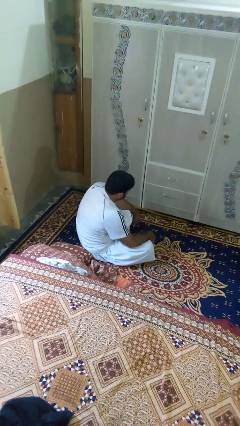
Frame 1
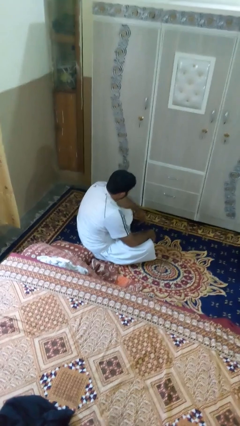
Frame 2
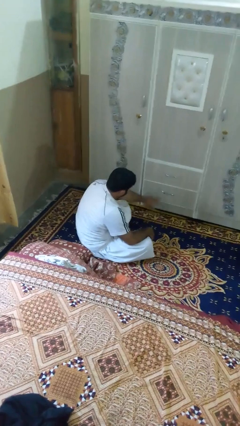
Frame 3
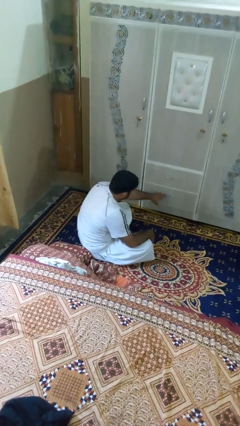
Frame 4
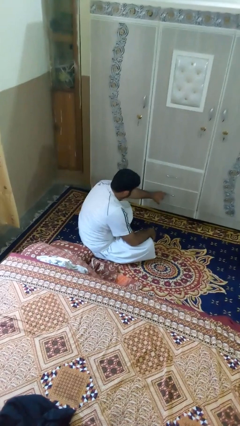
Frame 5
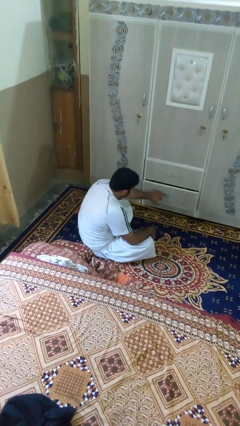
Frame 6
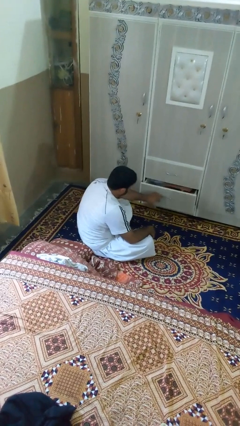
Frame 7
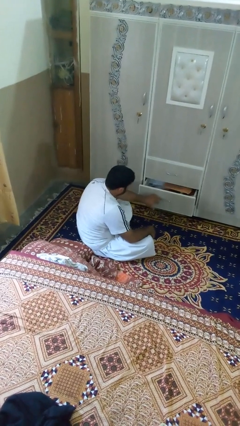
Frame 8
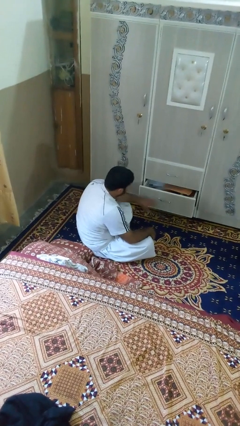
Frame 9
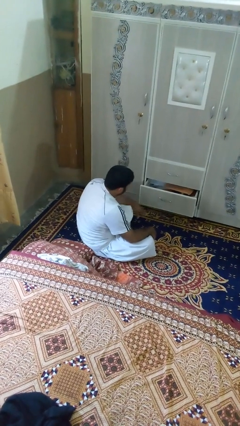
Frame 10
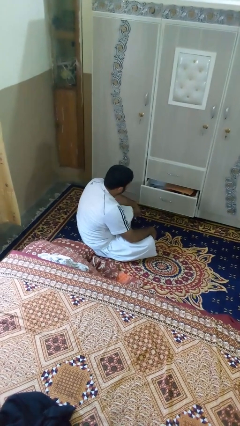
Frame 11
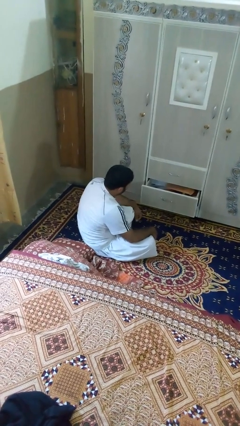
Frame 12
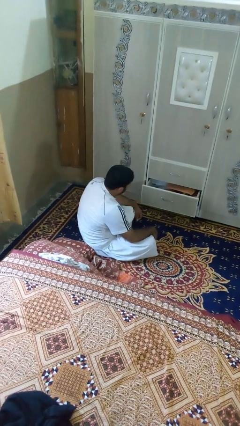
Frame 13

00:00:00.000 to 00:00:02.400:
person opens dresser drawer

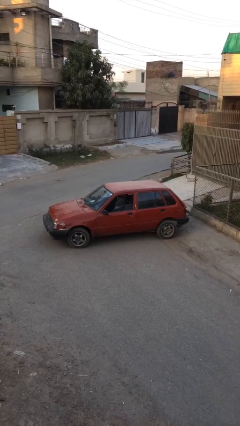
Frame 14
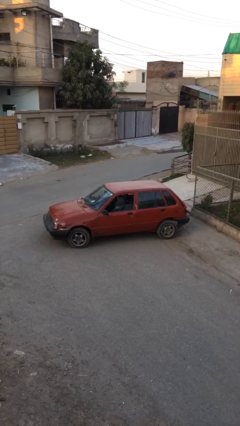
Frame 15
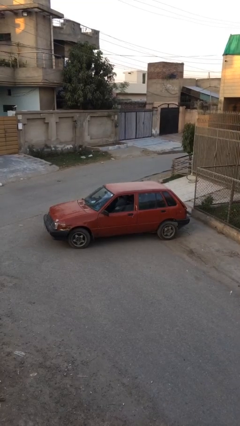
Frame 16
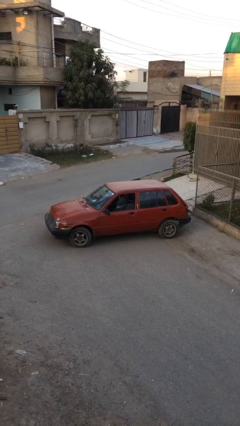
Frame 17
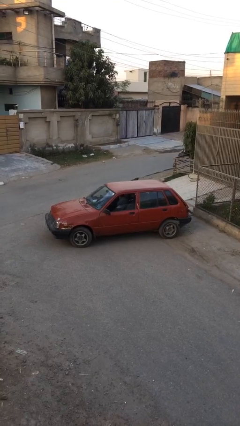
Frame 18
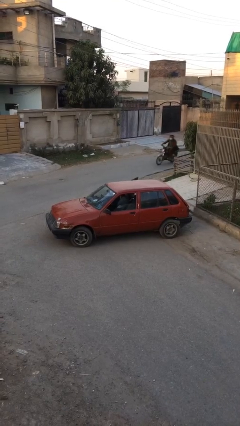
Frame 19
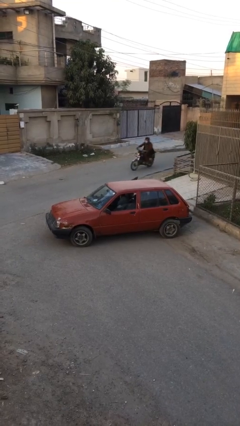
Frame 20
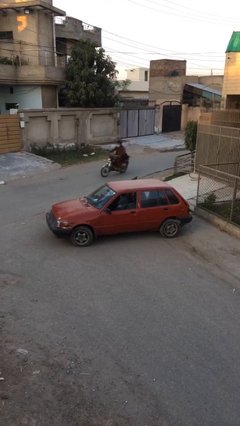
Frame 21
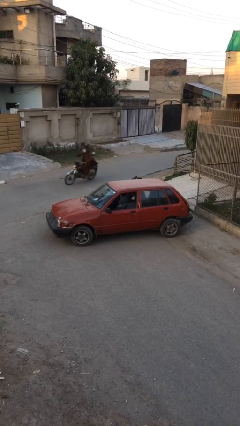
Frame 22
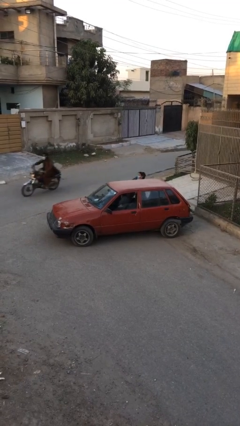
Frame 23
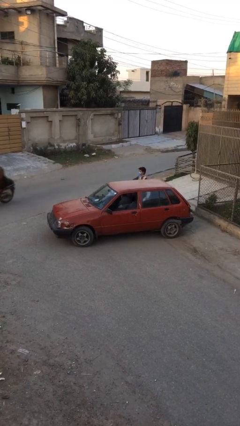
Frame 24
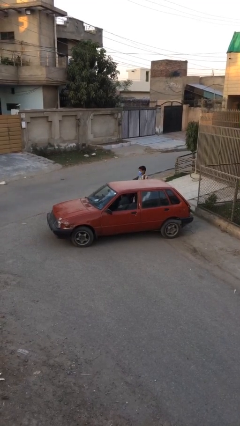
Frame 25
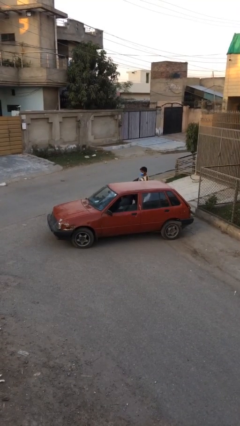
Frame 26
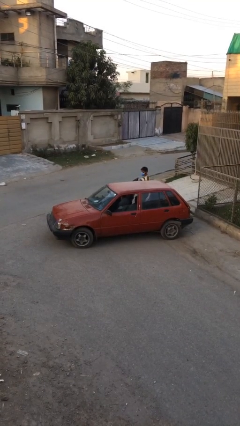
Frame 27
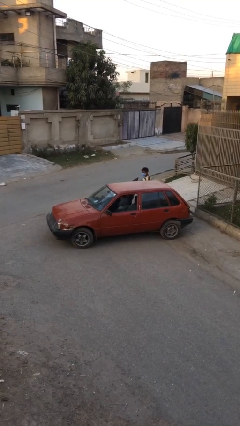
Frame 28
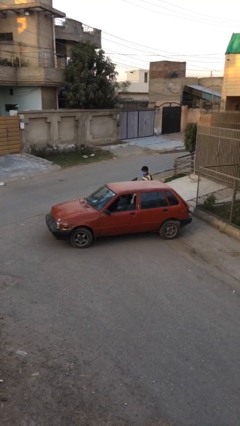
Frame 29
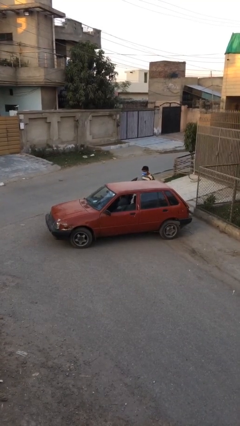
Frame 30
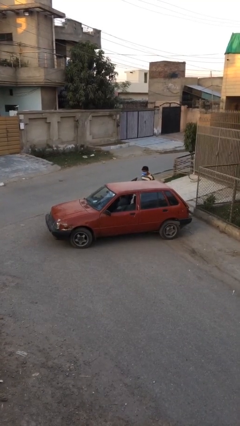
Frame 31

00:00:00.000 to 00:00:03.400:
car drops off person

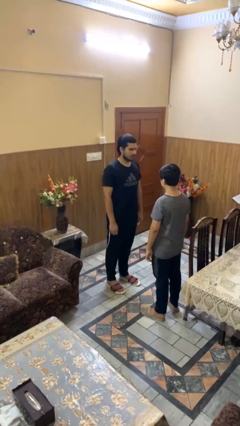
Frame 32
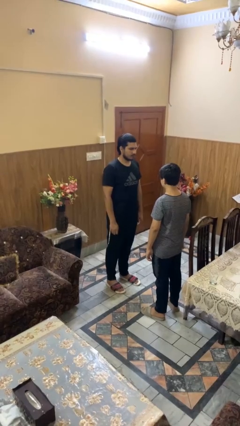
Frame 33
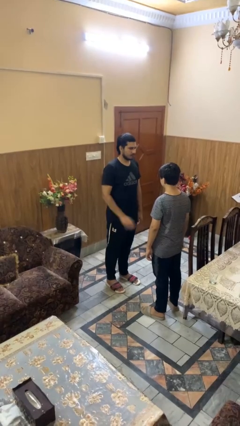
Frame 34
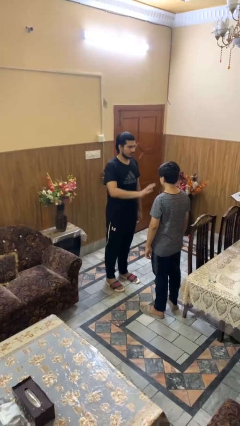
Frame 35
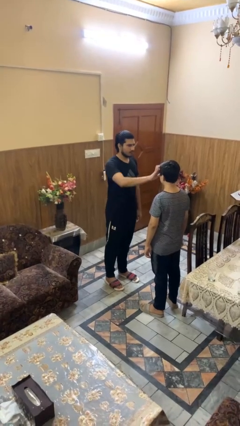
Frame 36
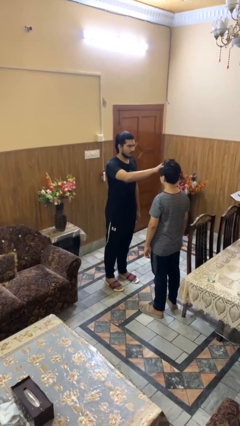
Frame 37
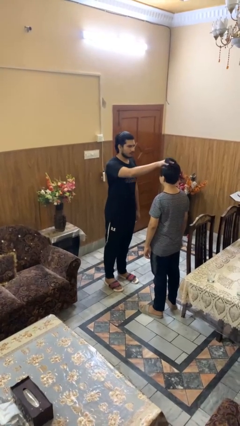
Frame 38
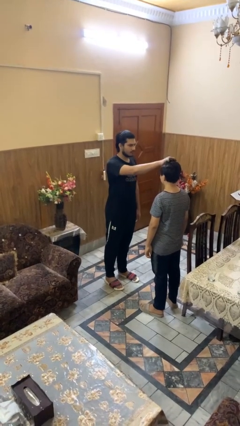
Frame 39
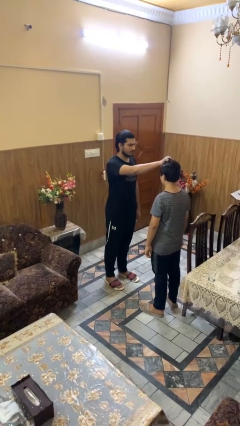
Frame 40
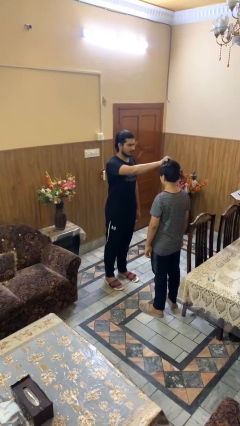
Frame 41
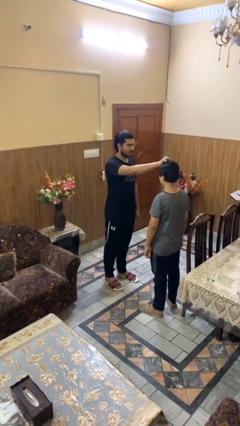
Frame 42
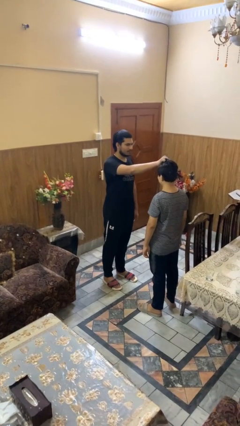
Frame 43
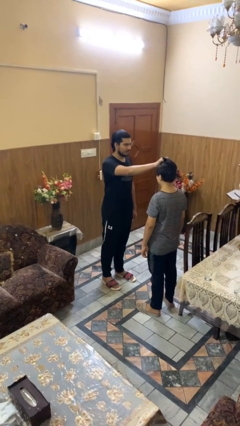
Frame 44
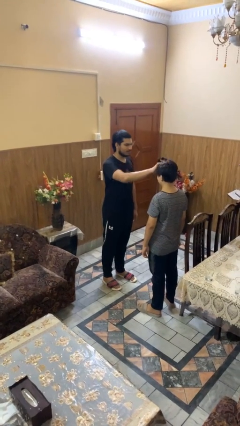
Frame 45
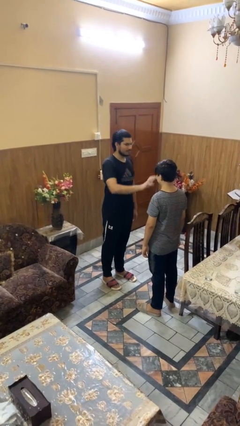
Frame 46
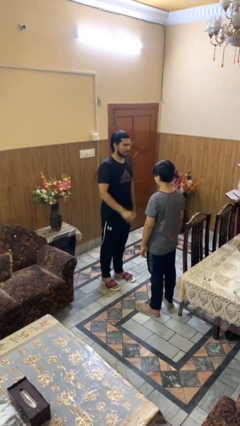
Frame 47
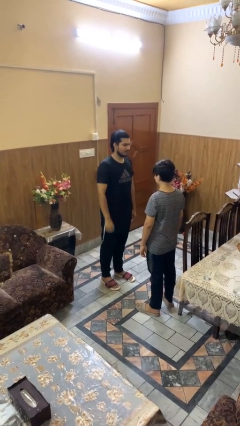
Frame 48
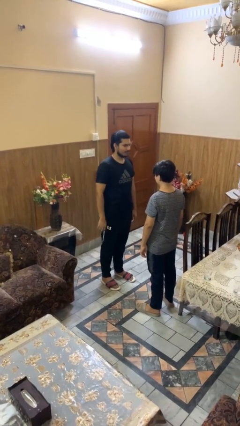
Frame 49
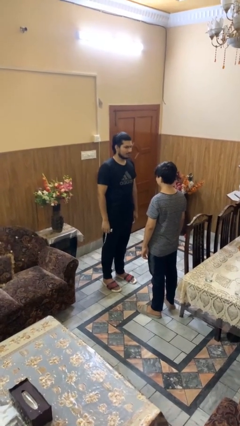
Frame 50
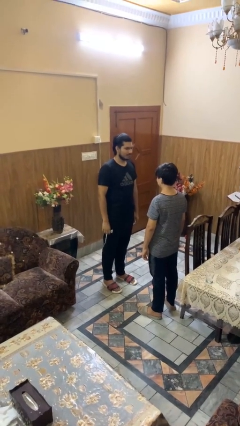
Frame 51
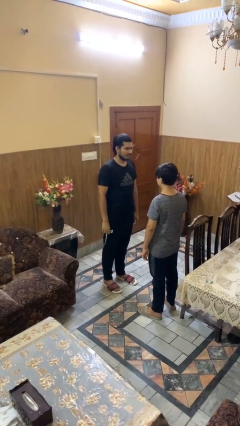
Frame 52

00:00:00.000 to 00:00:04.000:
person grabs person by hair

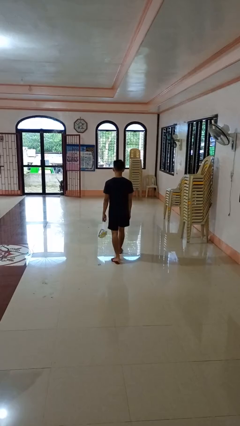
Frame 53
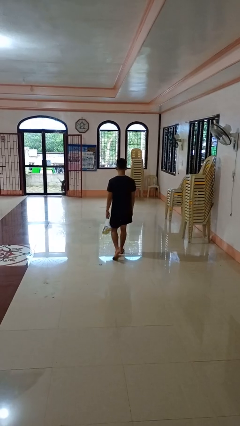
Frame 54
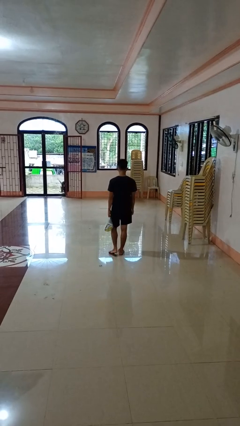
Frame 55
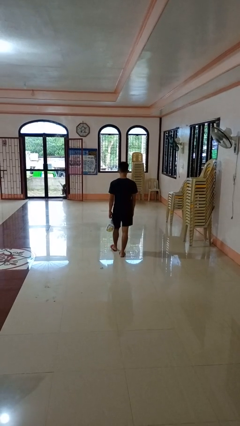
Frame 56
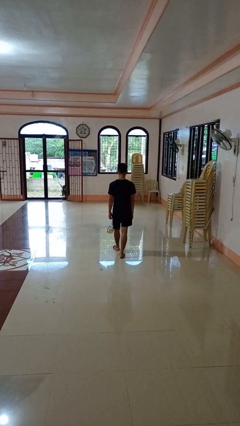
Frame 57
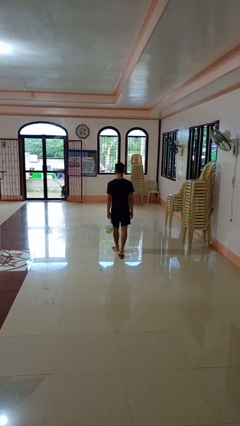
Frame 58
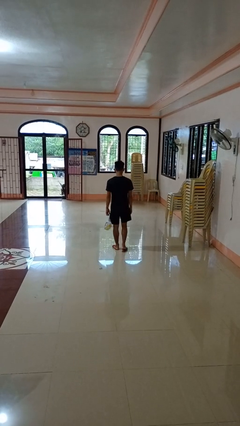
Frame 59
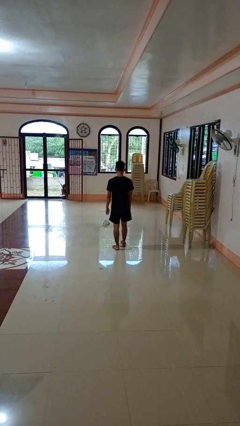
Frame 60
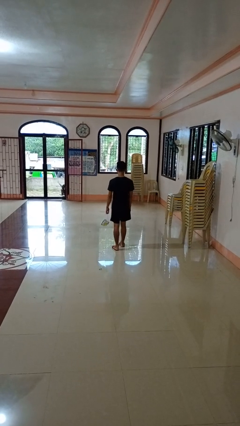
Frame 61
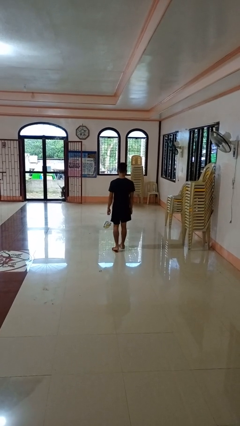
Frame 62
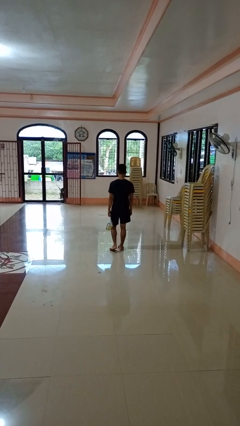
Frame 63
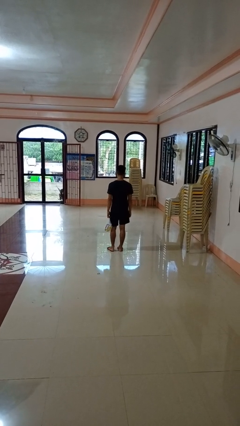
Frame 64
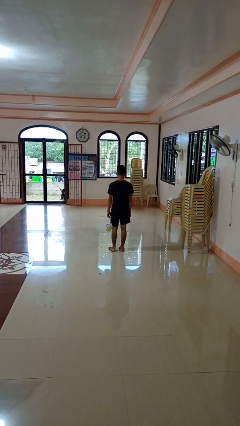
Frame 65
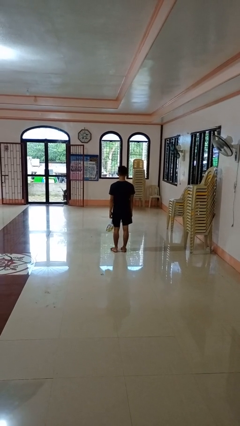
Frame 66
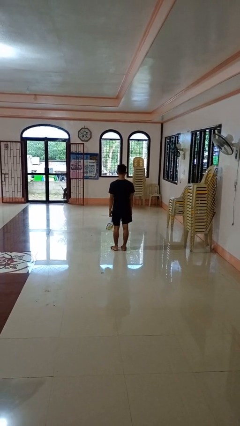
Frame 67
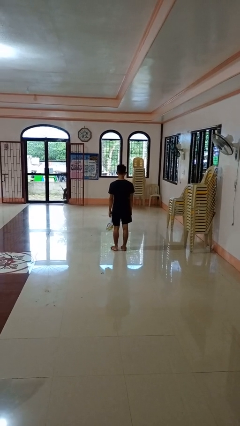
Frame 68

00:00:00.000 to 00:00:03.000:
person carries groceries

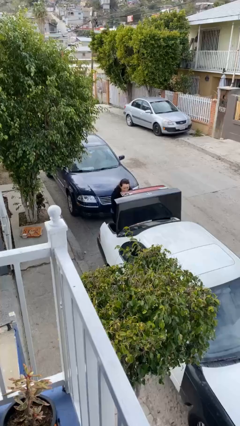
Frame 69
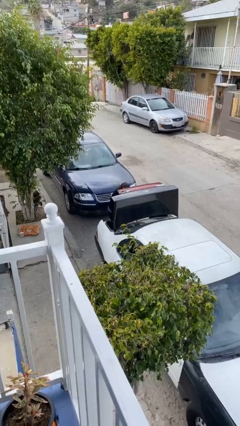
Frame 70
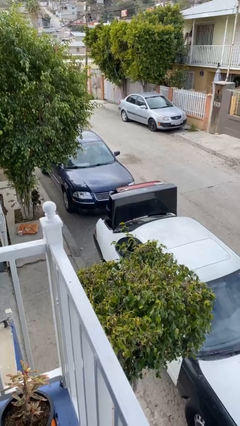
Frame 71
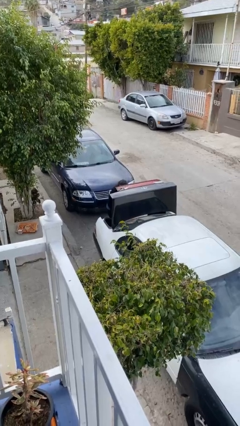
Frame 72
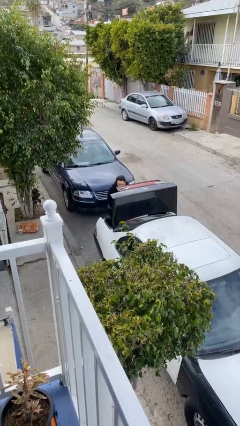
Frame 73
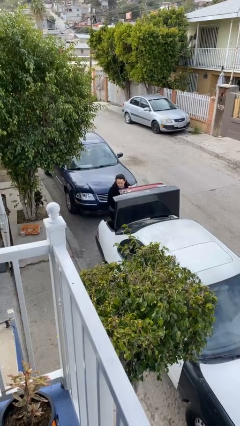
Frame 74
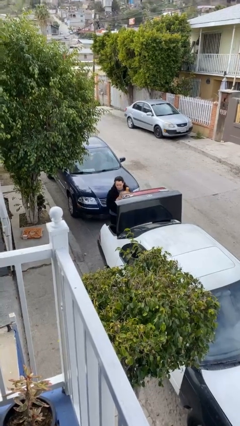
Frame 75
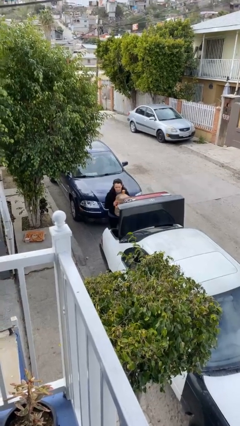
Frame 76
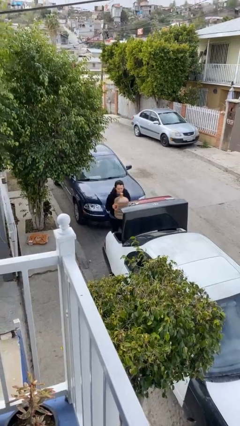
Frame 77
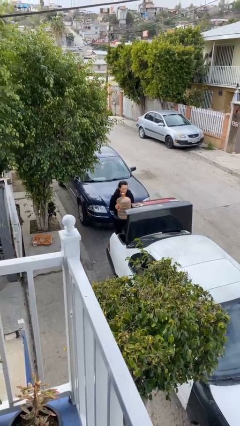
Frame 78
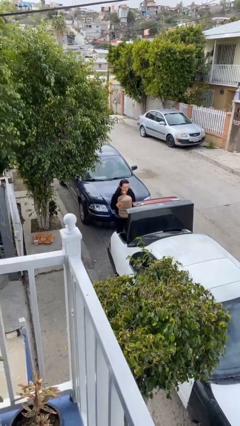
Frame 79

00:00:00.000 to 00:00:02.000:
person unloads car

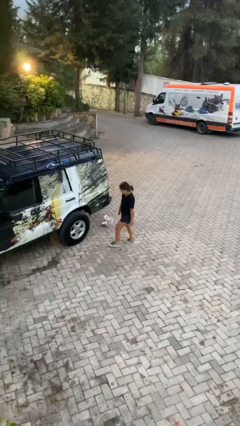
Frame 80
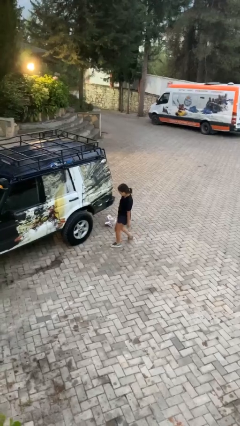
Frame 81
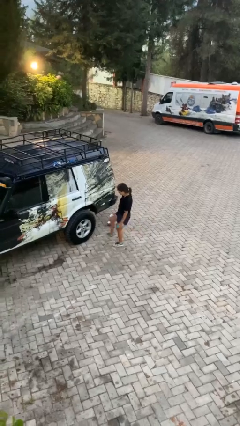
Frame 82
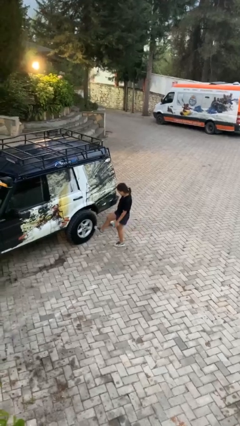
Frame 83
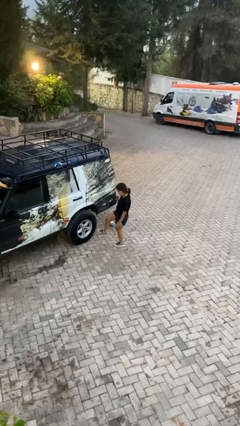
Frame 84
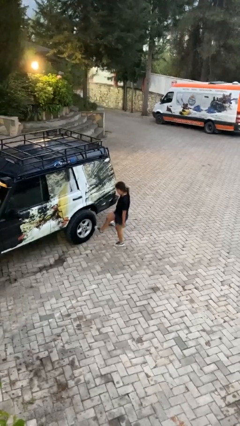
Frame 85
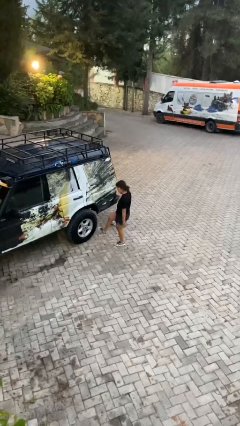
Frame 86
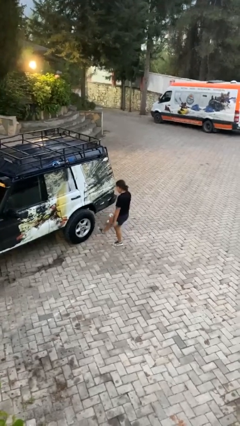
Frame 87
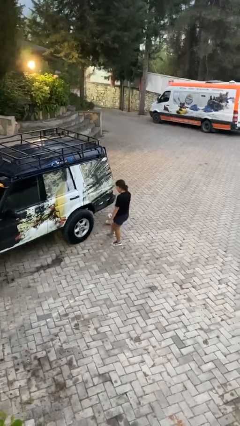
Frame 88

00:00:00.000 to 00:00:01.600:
person kicks car tires

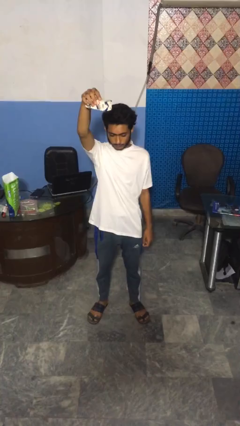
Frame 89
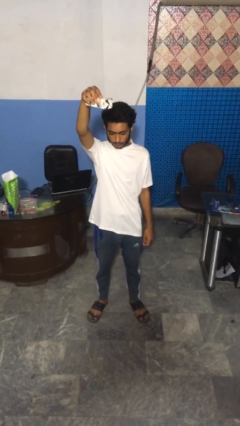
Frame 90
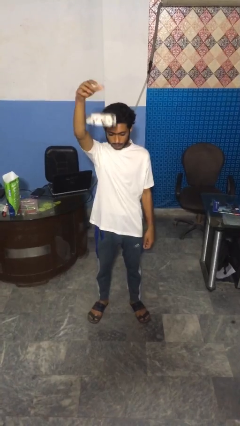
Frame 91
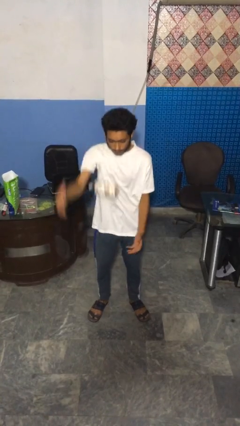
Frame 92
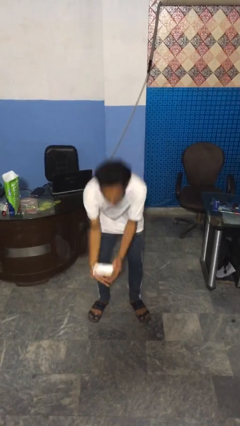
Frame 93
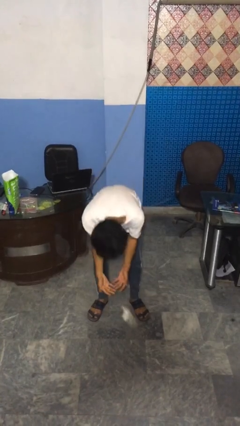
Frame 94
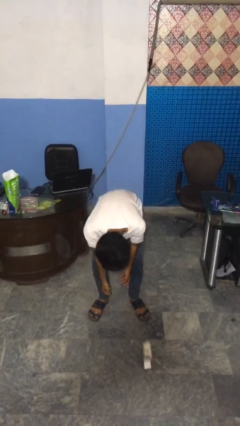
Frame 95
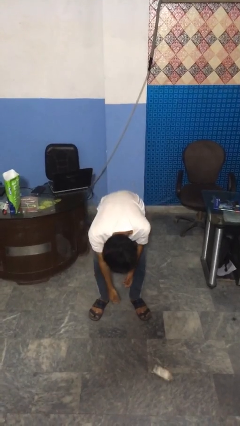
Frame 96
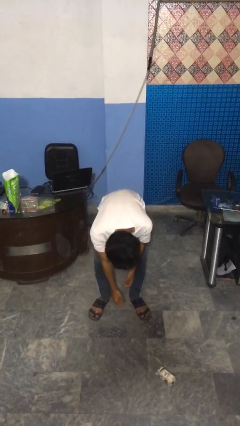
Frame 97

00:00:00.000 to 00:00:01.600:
person catches dropped object
